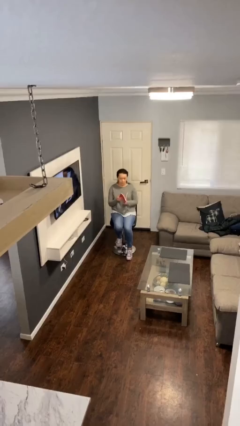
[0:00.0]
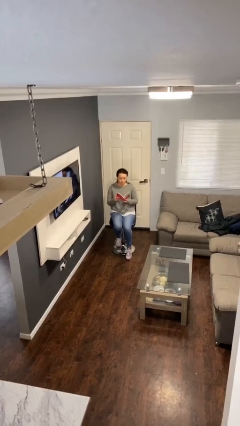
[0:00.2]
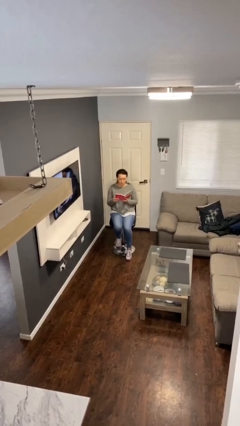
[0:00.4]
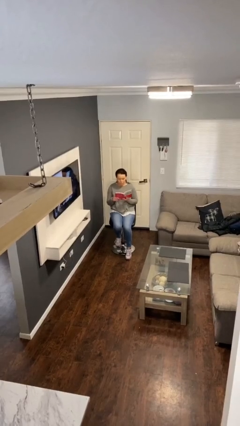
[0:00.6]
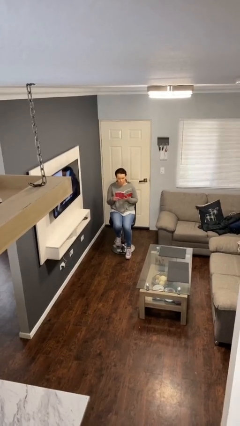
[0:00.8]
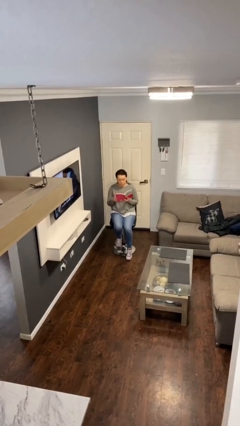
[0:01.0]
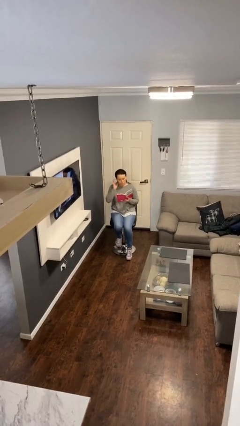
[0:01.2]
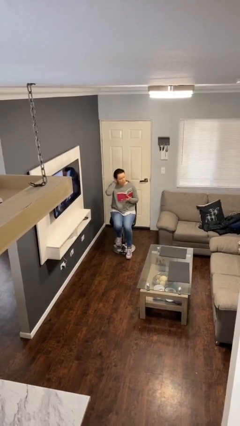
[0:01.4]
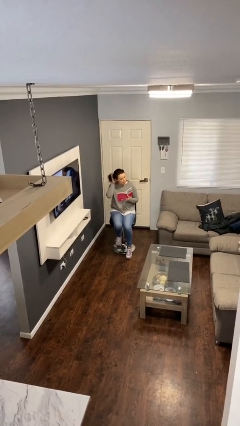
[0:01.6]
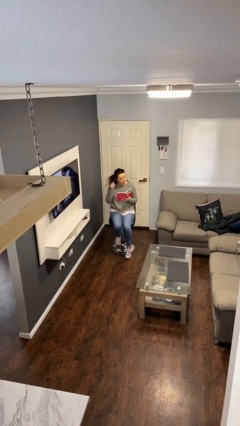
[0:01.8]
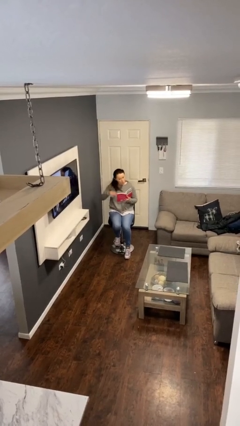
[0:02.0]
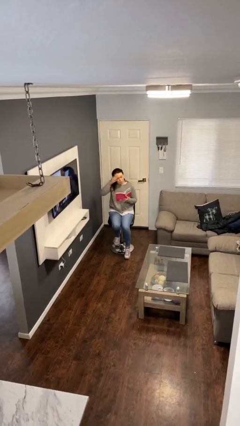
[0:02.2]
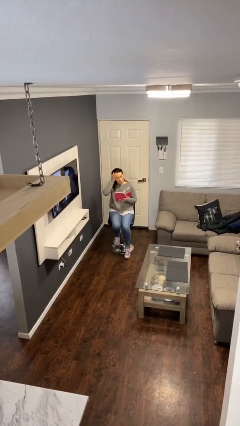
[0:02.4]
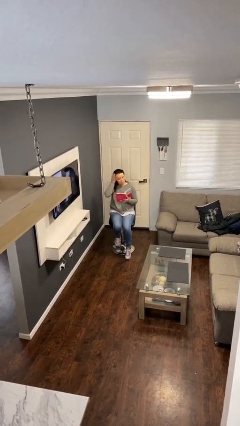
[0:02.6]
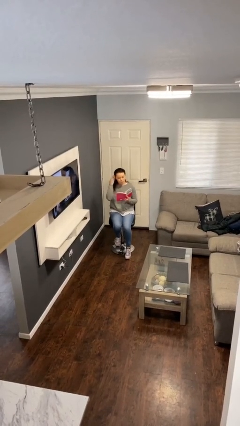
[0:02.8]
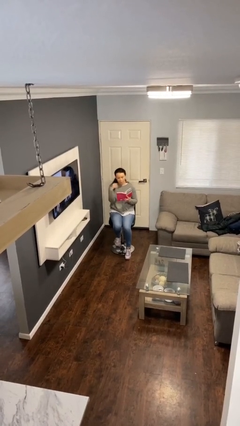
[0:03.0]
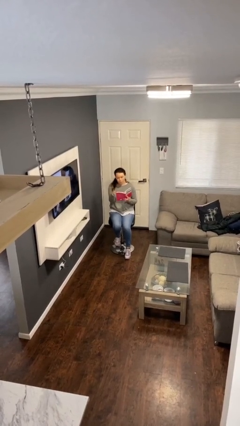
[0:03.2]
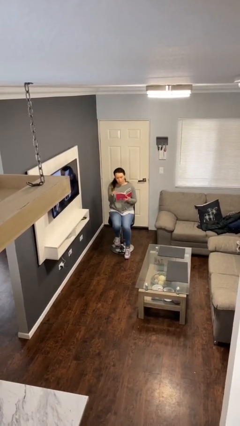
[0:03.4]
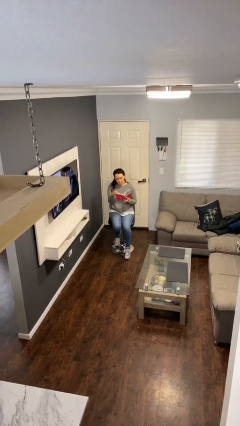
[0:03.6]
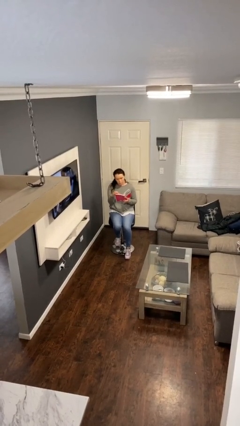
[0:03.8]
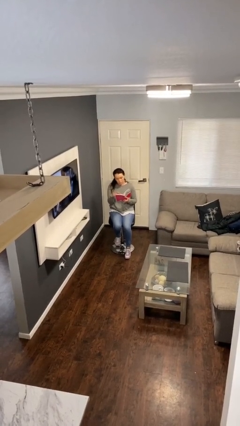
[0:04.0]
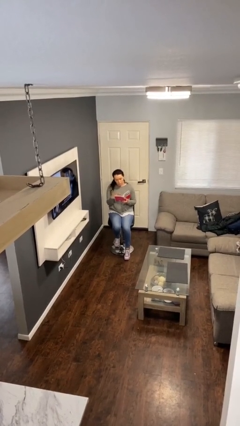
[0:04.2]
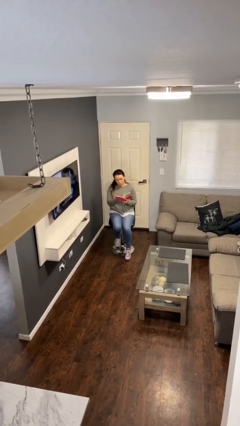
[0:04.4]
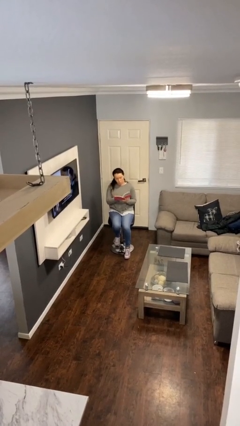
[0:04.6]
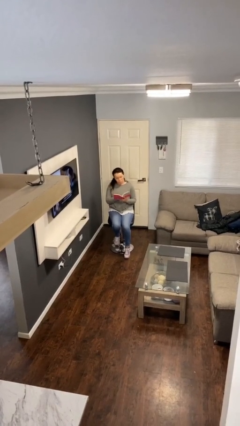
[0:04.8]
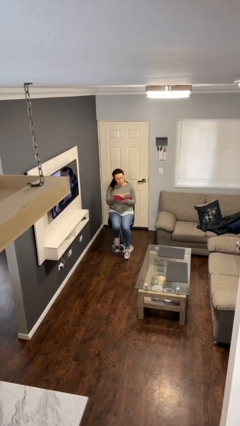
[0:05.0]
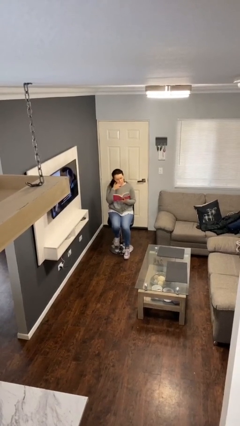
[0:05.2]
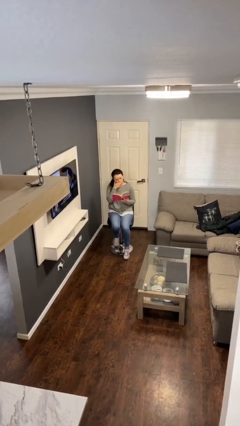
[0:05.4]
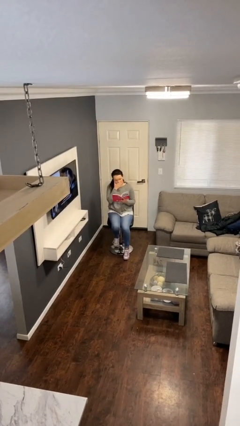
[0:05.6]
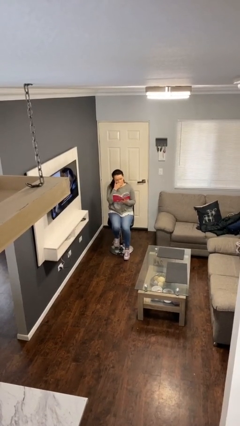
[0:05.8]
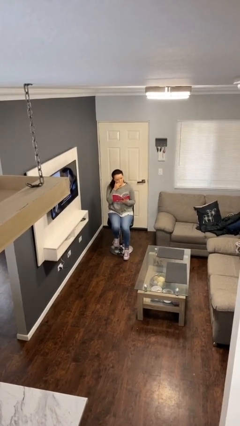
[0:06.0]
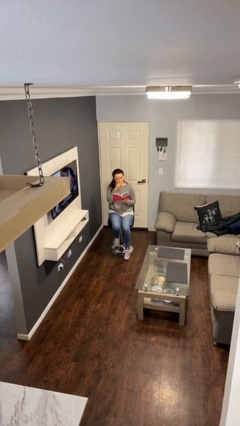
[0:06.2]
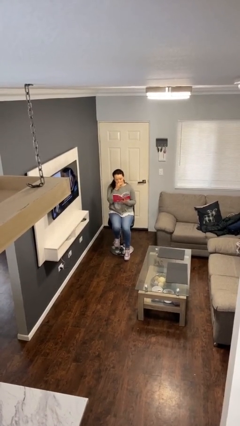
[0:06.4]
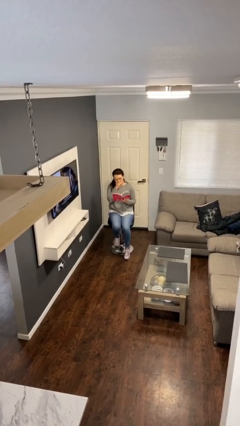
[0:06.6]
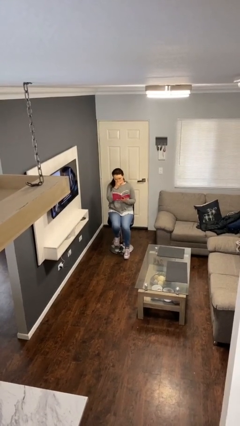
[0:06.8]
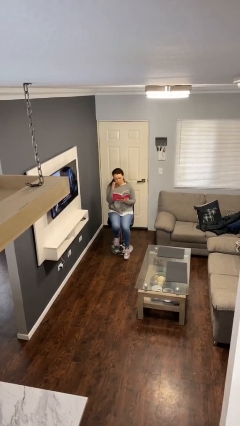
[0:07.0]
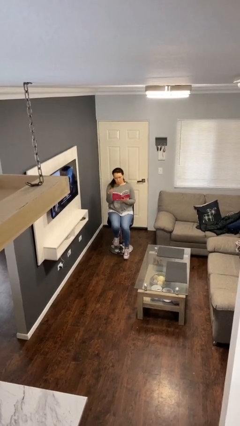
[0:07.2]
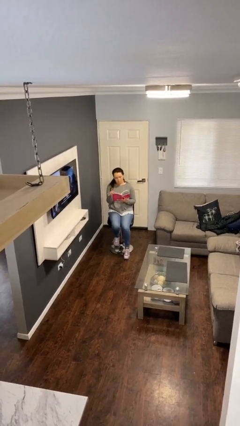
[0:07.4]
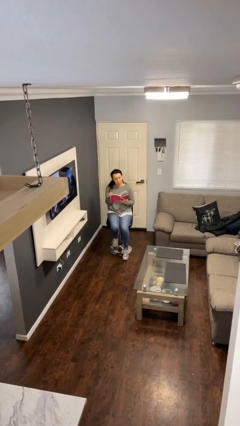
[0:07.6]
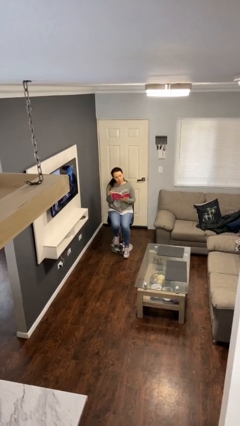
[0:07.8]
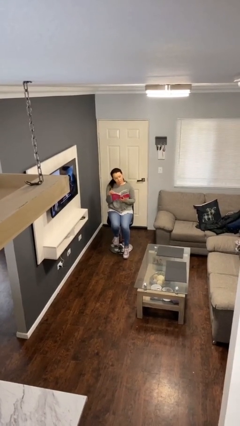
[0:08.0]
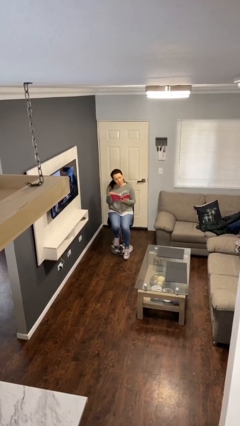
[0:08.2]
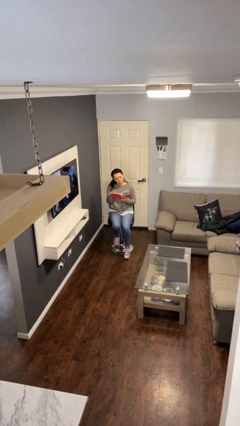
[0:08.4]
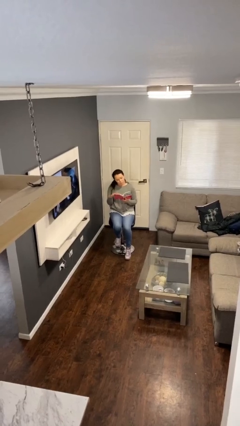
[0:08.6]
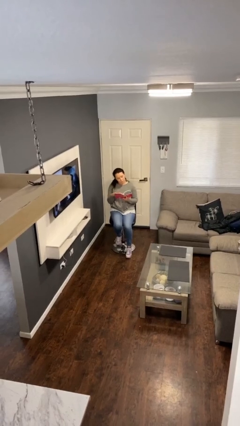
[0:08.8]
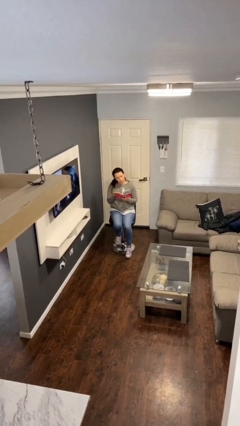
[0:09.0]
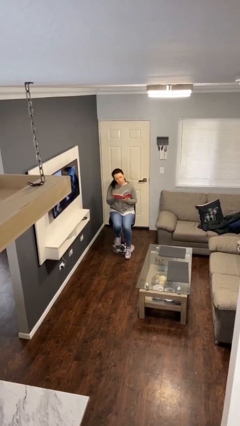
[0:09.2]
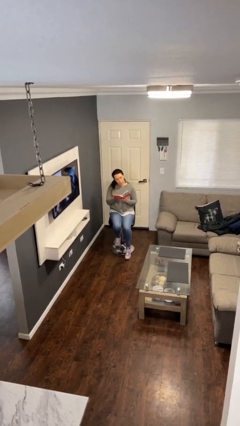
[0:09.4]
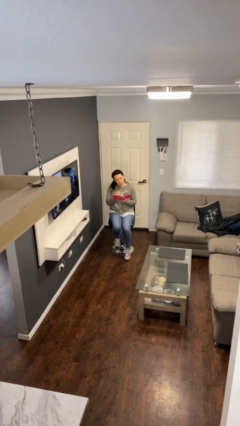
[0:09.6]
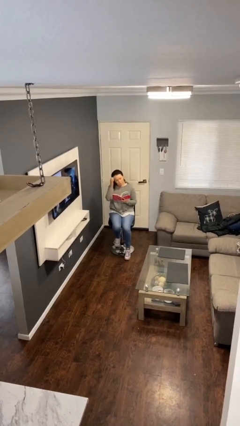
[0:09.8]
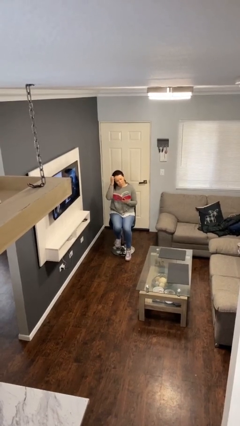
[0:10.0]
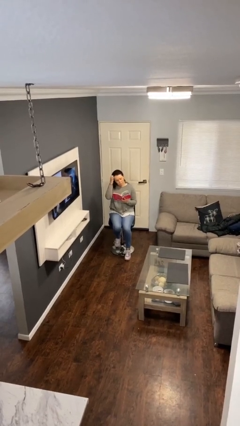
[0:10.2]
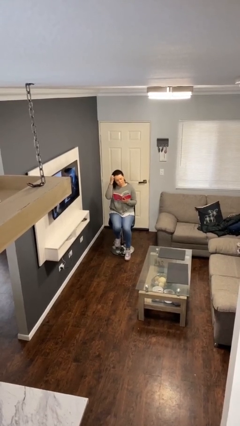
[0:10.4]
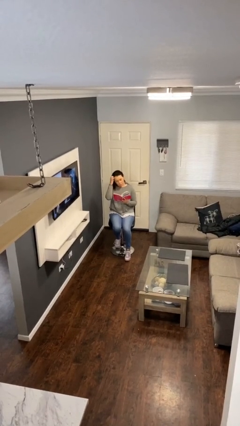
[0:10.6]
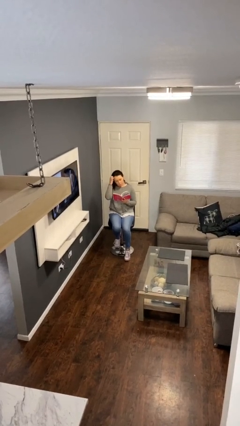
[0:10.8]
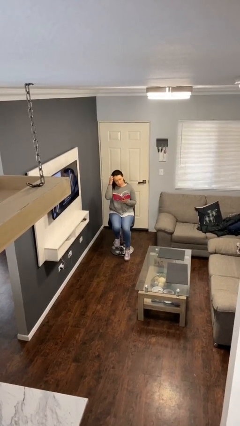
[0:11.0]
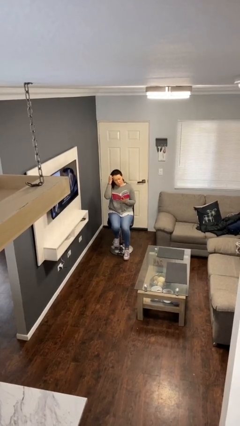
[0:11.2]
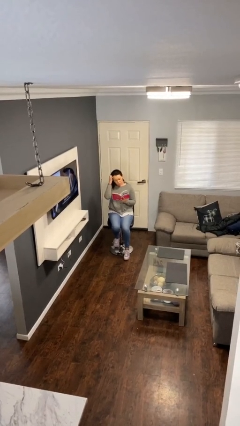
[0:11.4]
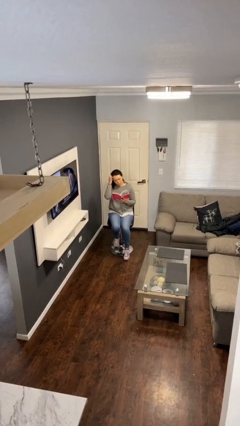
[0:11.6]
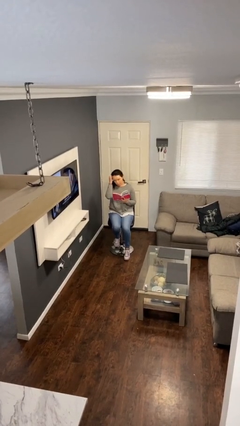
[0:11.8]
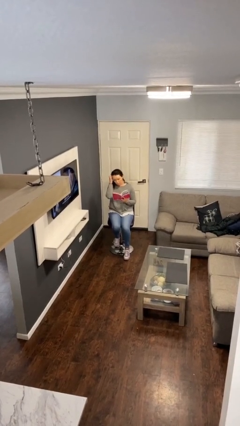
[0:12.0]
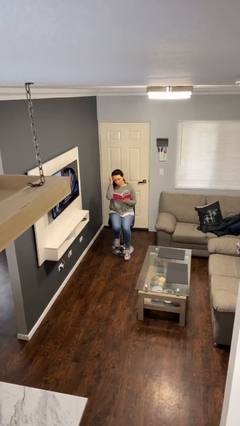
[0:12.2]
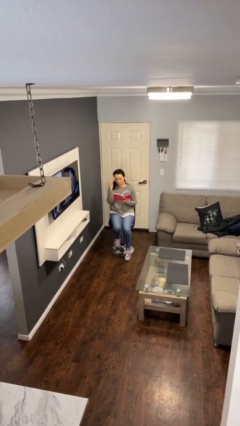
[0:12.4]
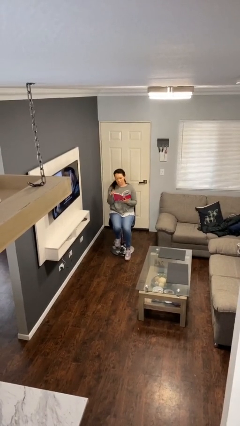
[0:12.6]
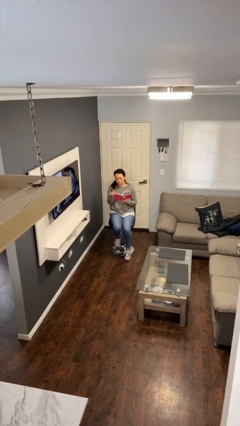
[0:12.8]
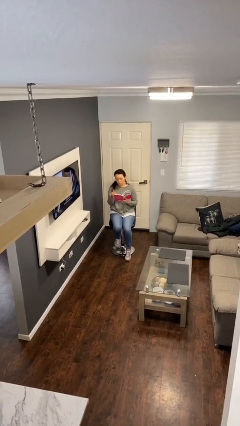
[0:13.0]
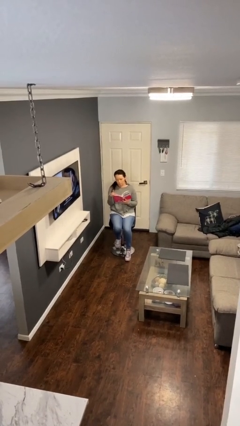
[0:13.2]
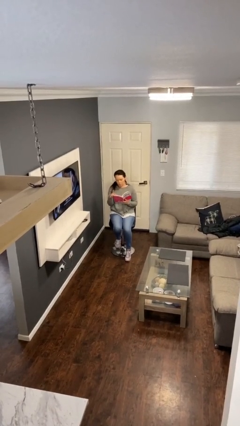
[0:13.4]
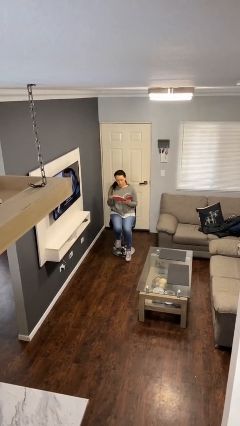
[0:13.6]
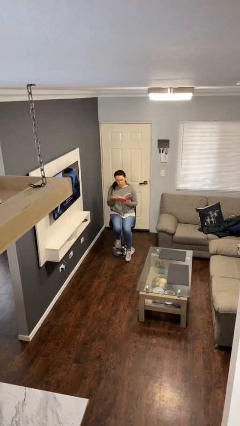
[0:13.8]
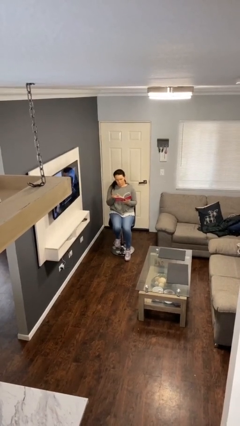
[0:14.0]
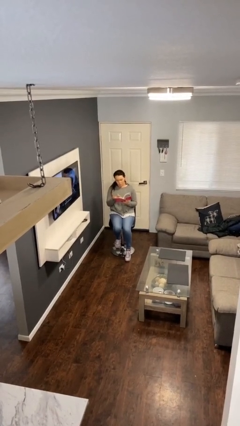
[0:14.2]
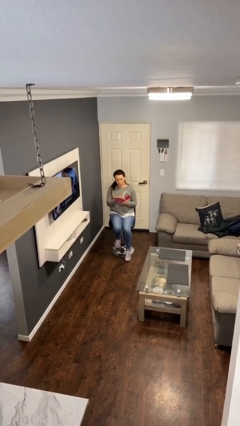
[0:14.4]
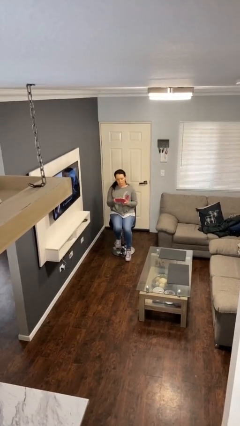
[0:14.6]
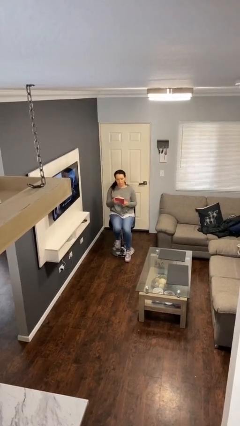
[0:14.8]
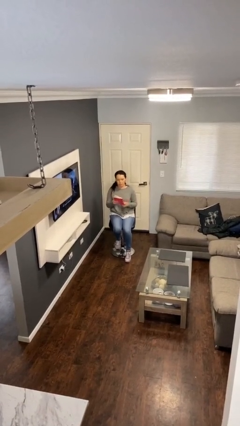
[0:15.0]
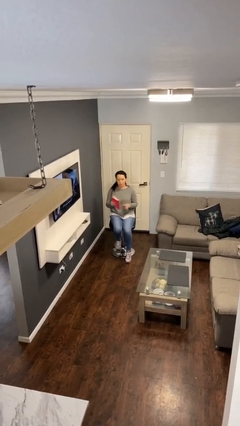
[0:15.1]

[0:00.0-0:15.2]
person reads document

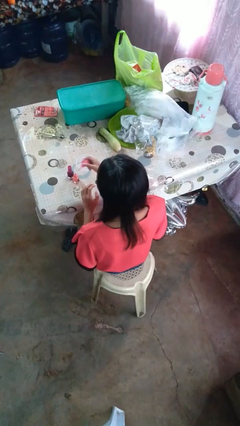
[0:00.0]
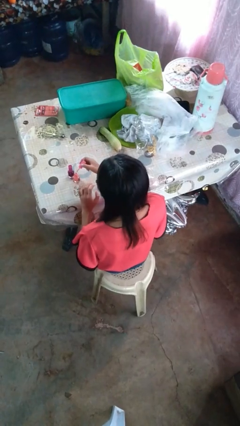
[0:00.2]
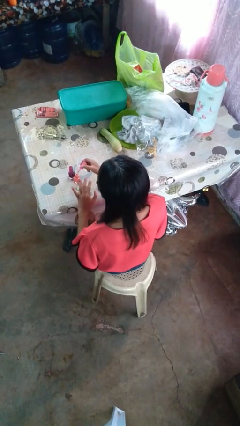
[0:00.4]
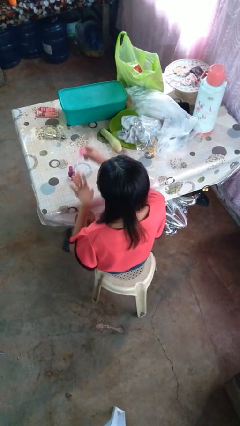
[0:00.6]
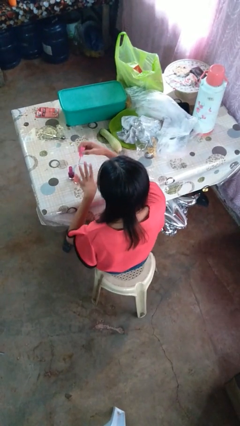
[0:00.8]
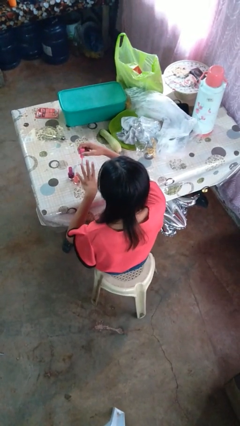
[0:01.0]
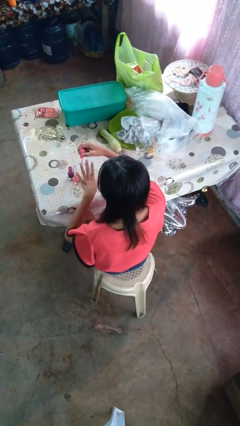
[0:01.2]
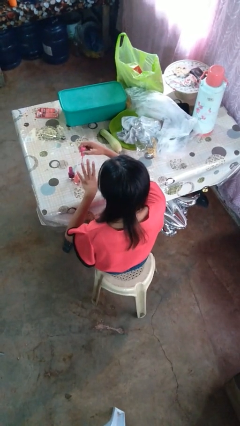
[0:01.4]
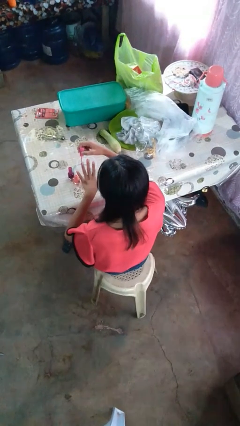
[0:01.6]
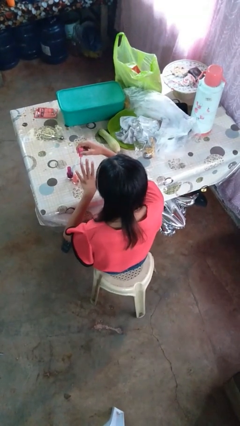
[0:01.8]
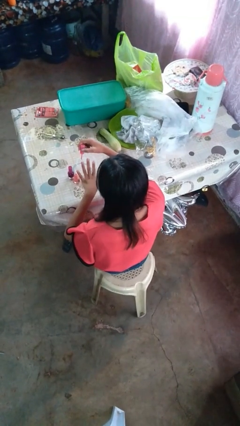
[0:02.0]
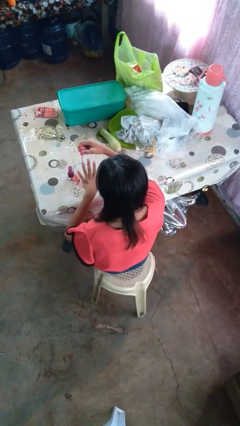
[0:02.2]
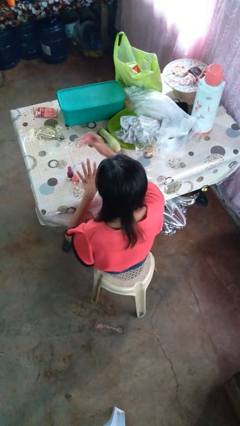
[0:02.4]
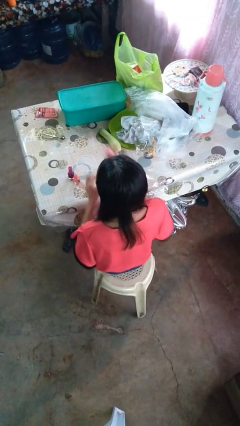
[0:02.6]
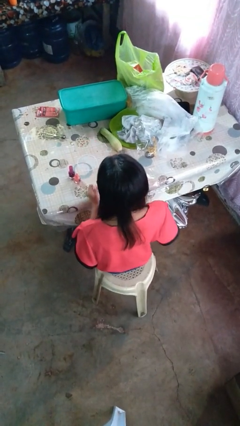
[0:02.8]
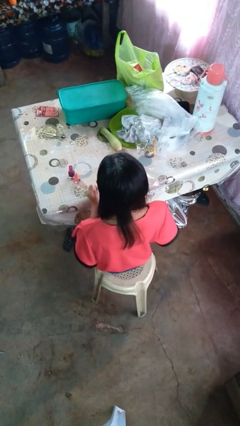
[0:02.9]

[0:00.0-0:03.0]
person paints fingernails
